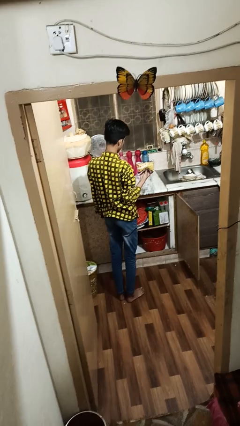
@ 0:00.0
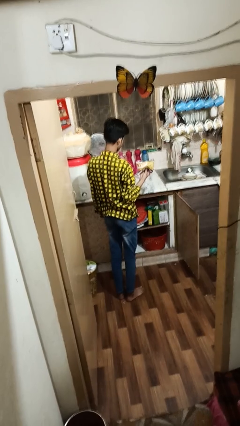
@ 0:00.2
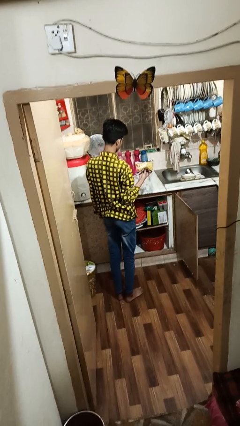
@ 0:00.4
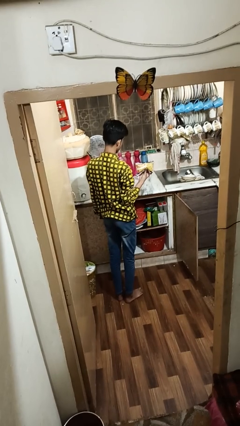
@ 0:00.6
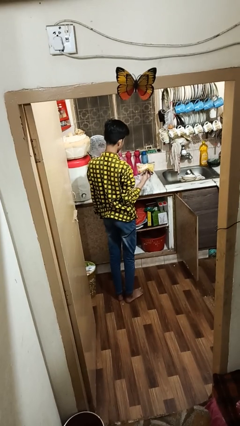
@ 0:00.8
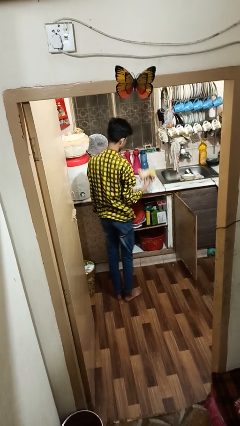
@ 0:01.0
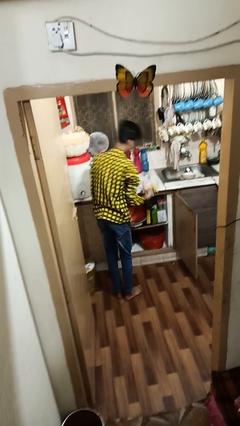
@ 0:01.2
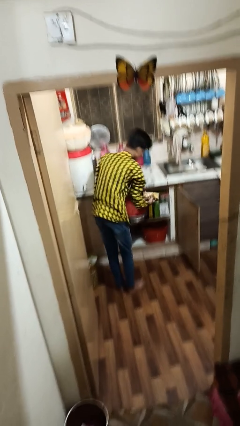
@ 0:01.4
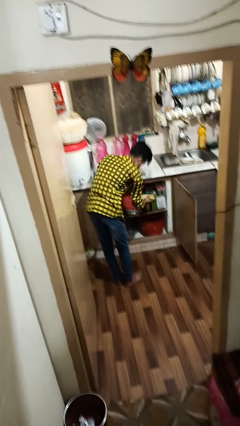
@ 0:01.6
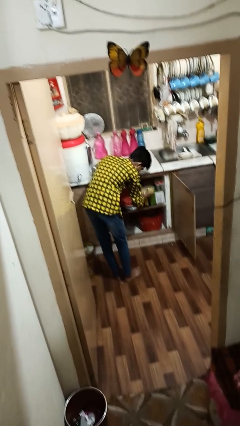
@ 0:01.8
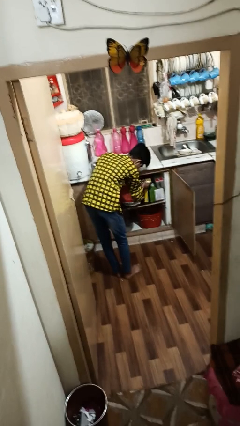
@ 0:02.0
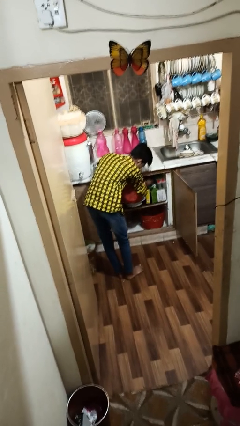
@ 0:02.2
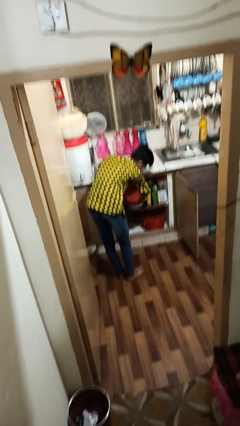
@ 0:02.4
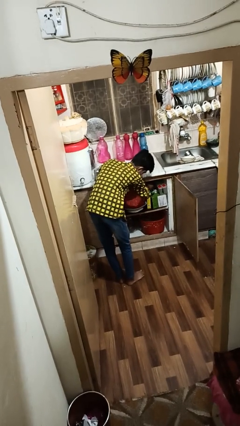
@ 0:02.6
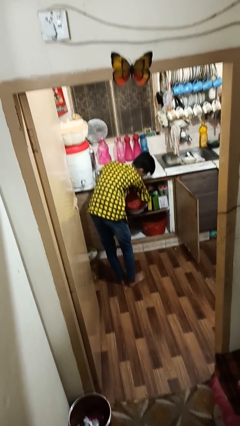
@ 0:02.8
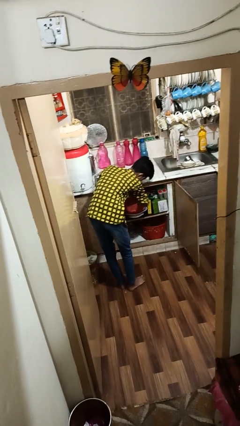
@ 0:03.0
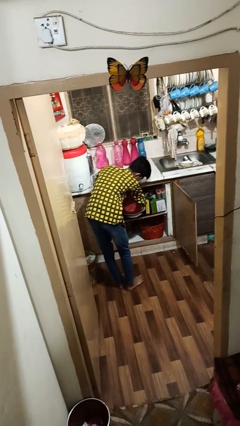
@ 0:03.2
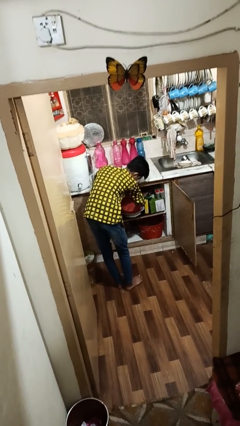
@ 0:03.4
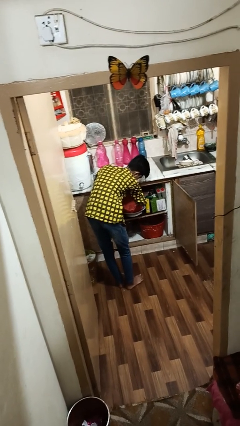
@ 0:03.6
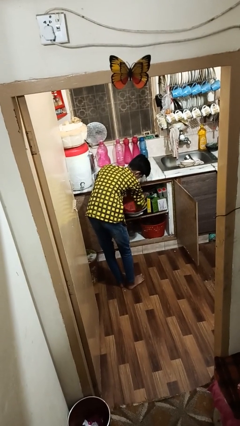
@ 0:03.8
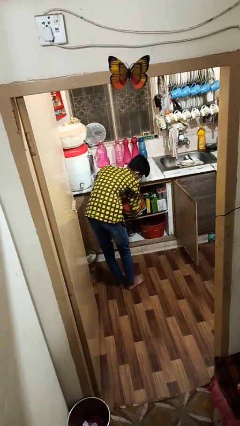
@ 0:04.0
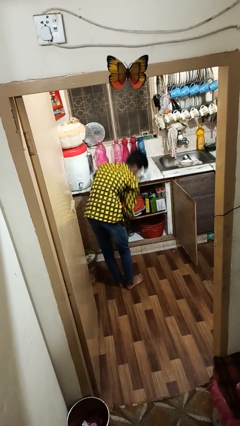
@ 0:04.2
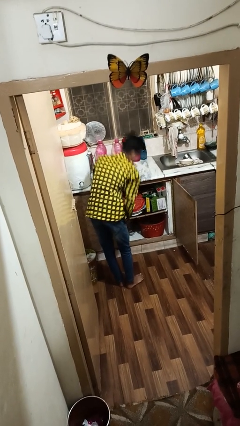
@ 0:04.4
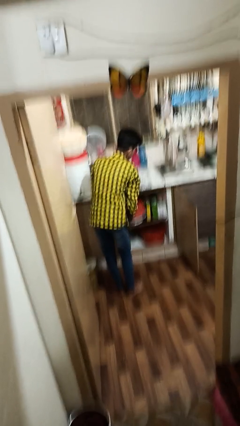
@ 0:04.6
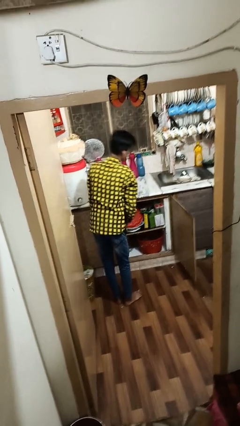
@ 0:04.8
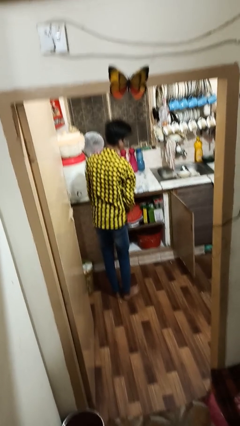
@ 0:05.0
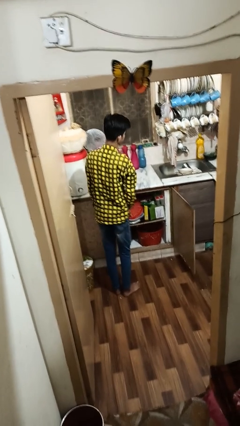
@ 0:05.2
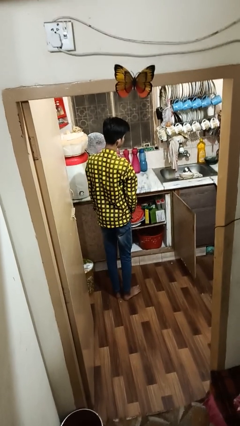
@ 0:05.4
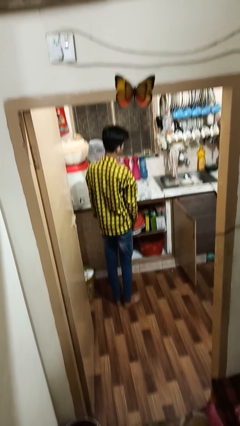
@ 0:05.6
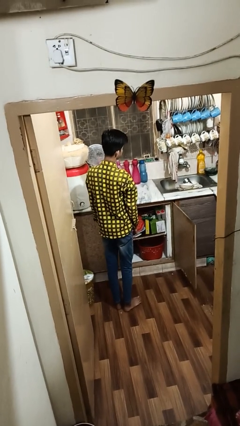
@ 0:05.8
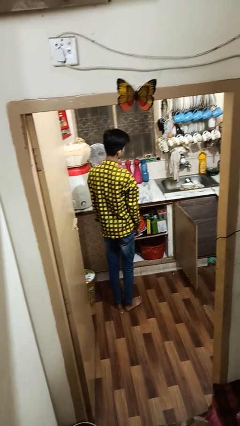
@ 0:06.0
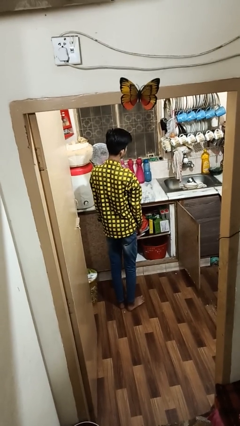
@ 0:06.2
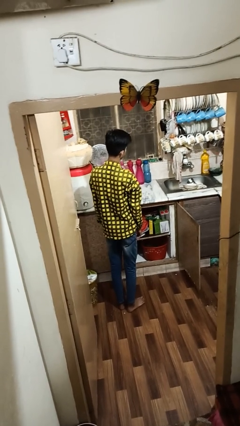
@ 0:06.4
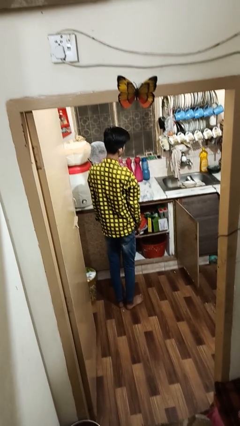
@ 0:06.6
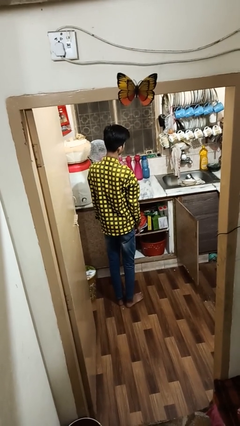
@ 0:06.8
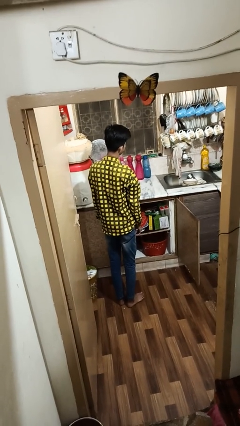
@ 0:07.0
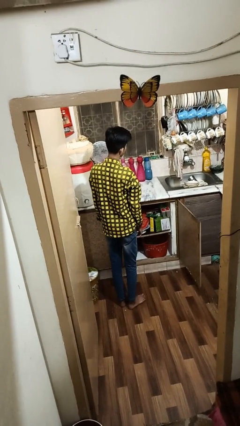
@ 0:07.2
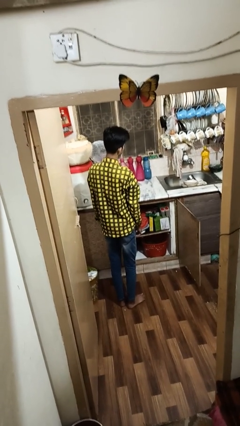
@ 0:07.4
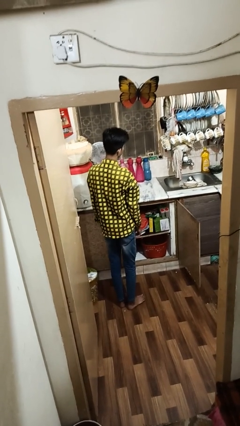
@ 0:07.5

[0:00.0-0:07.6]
person puts object in cabinet

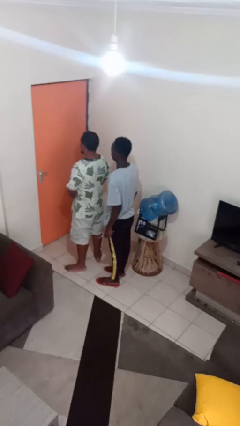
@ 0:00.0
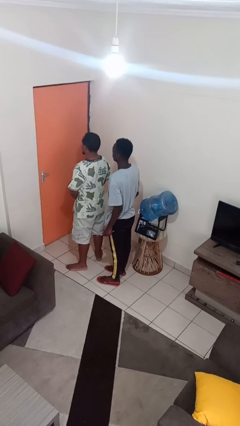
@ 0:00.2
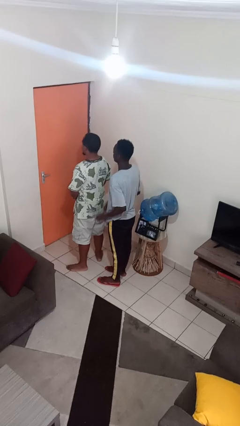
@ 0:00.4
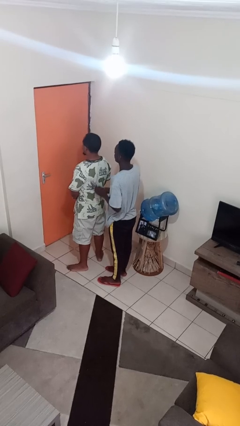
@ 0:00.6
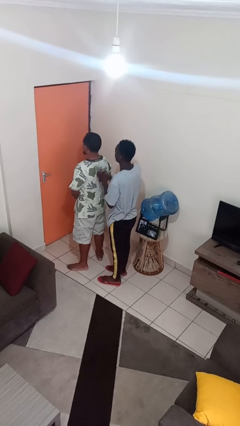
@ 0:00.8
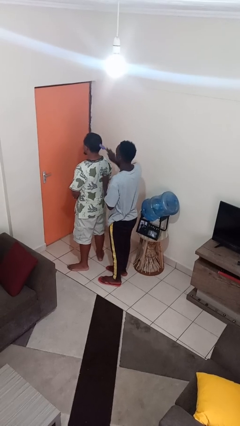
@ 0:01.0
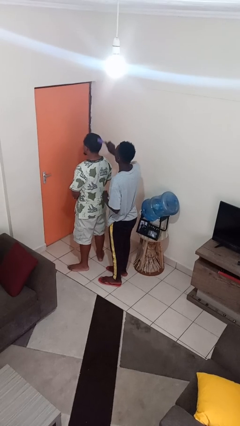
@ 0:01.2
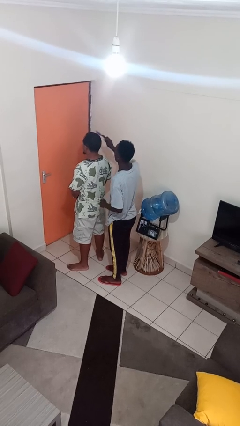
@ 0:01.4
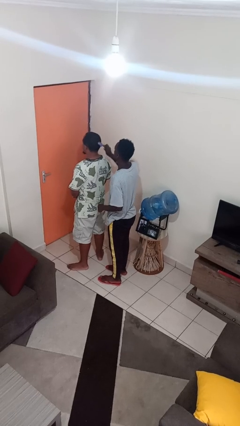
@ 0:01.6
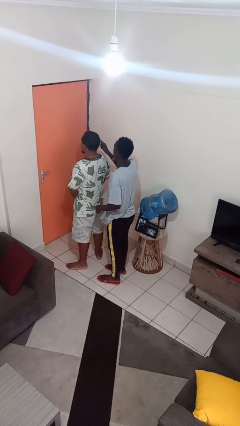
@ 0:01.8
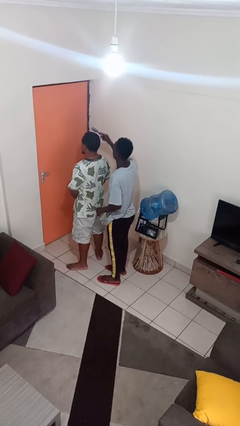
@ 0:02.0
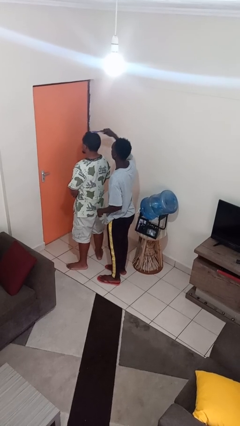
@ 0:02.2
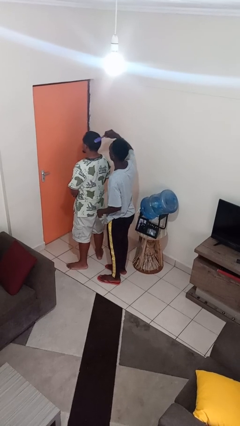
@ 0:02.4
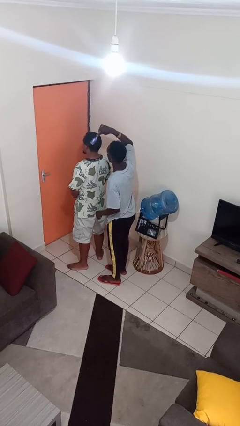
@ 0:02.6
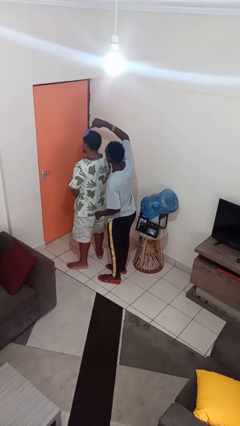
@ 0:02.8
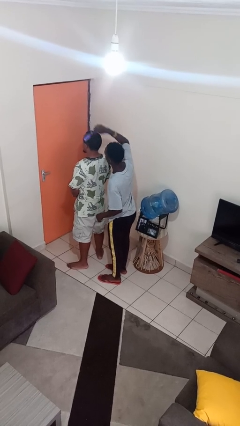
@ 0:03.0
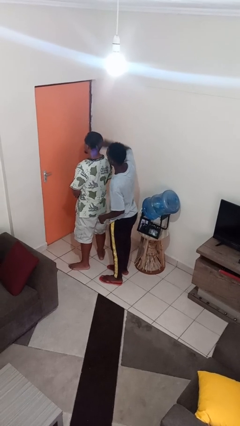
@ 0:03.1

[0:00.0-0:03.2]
person brushes hair of person

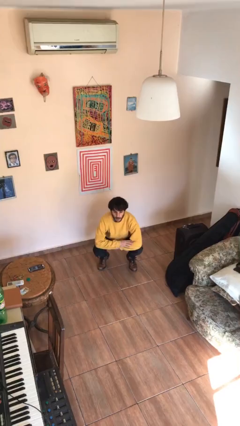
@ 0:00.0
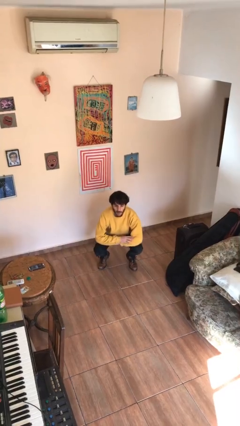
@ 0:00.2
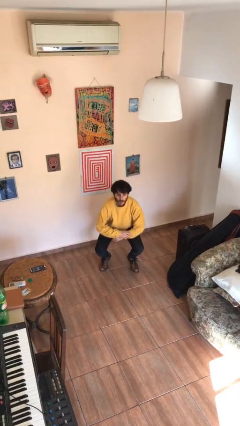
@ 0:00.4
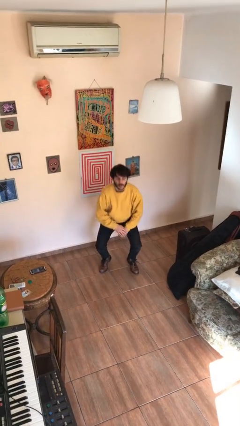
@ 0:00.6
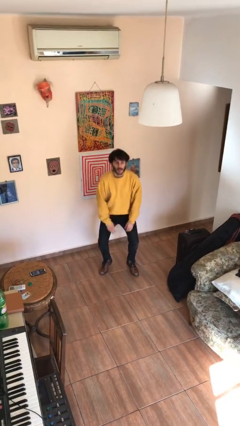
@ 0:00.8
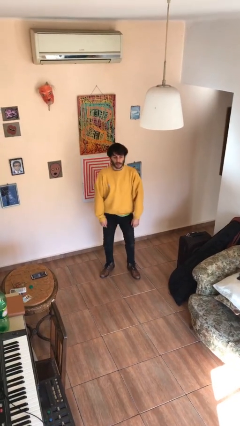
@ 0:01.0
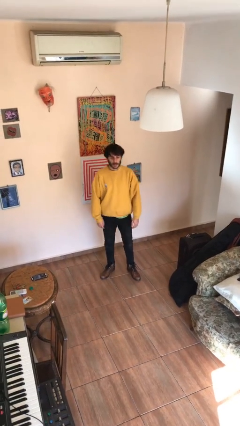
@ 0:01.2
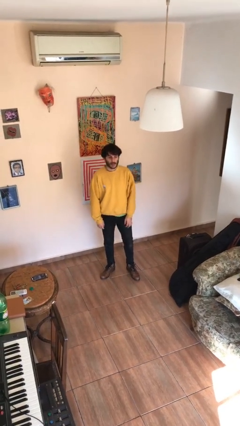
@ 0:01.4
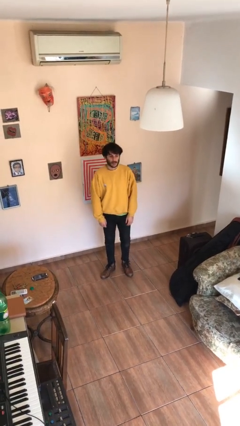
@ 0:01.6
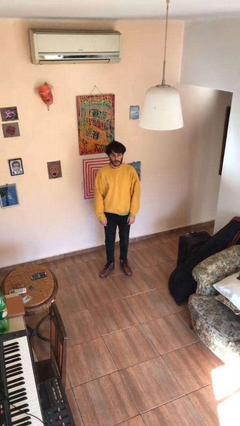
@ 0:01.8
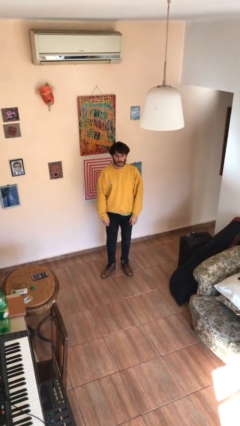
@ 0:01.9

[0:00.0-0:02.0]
person stands up

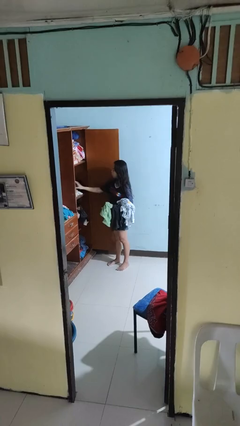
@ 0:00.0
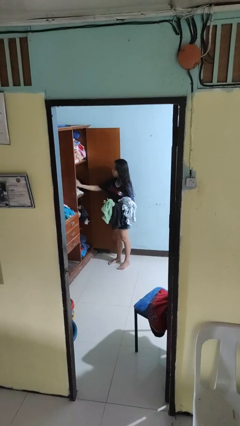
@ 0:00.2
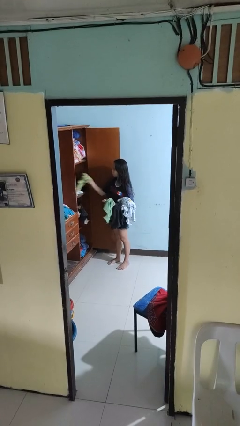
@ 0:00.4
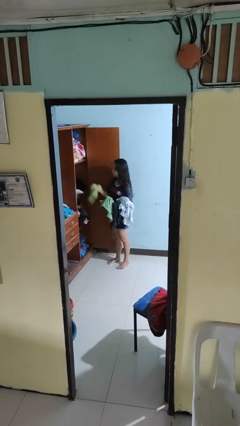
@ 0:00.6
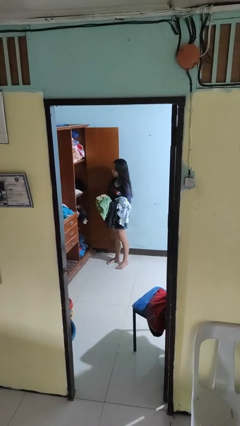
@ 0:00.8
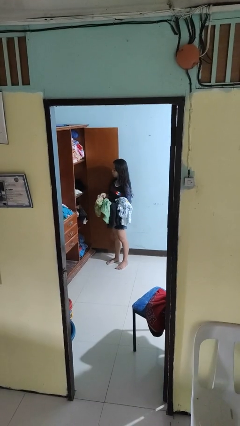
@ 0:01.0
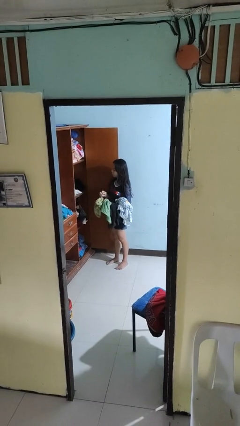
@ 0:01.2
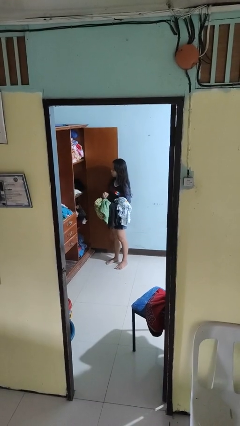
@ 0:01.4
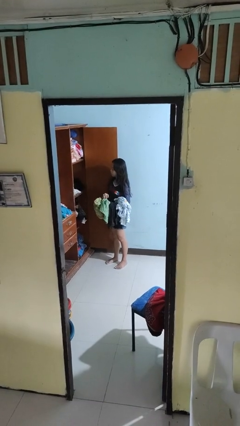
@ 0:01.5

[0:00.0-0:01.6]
person takes clothes from dresser

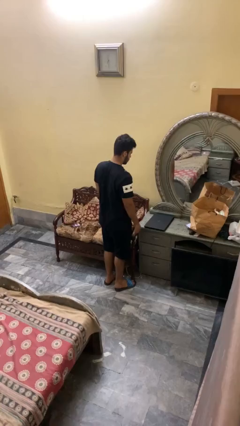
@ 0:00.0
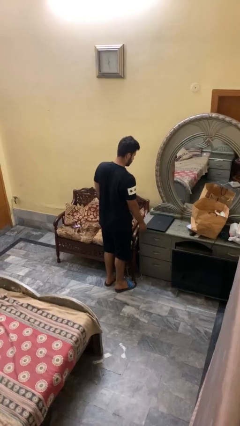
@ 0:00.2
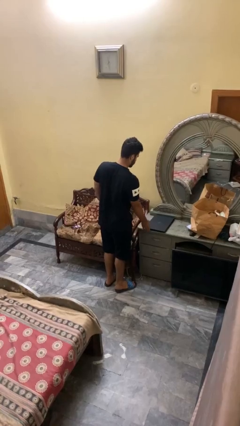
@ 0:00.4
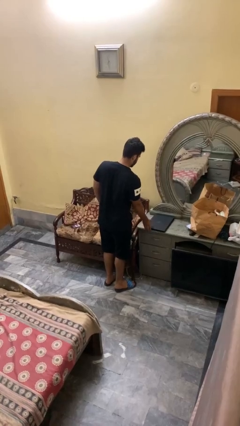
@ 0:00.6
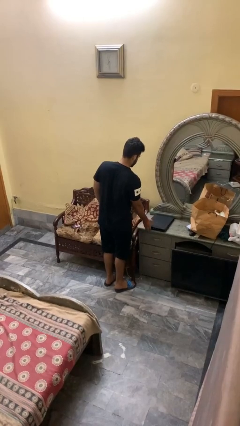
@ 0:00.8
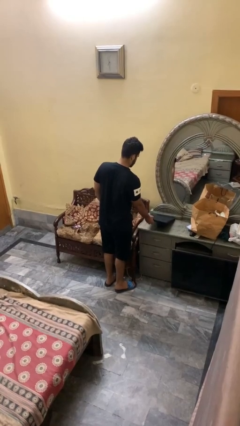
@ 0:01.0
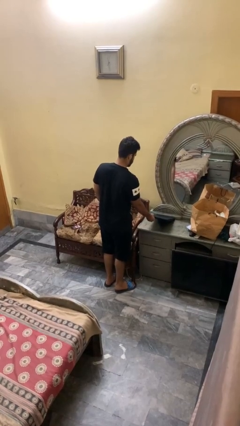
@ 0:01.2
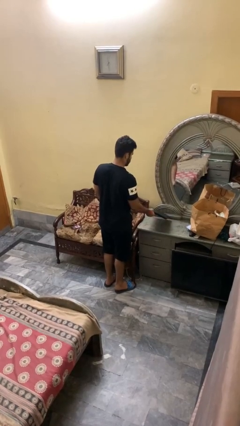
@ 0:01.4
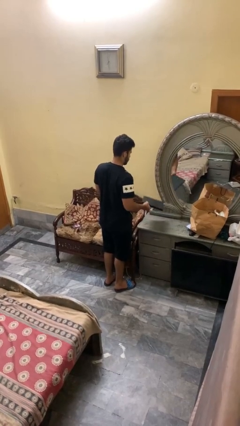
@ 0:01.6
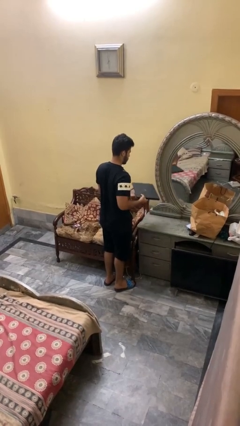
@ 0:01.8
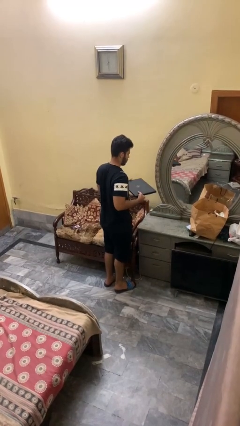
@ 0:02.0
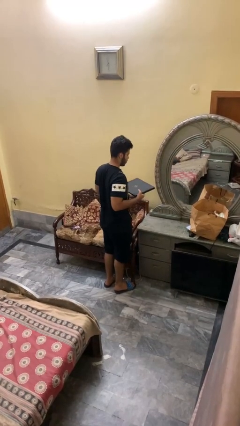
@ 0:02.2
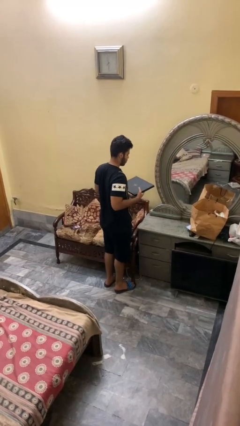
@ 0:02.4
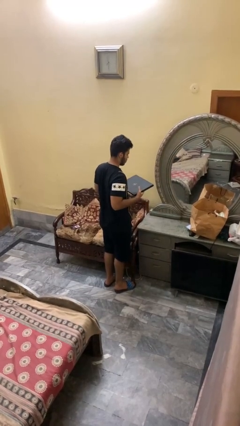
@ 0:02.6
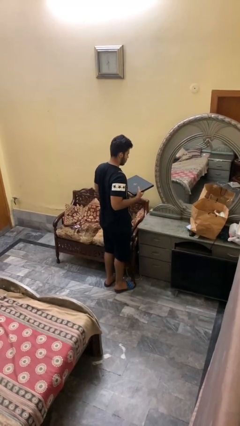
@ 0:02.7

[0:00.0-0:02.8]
person picks up object from countertop
